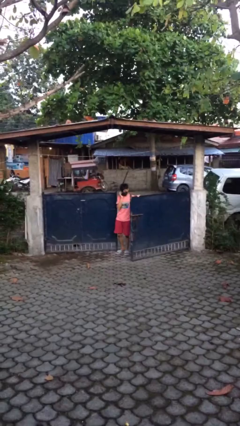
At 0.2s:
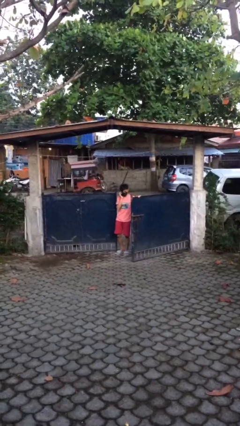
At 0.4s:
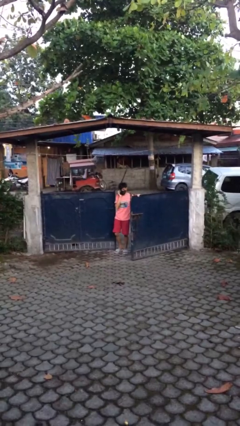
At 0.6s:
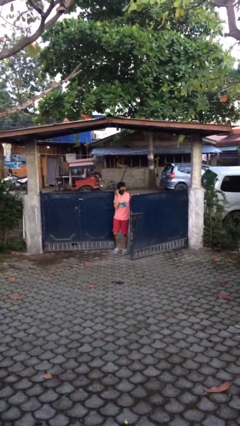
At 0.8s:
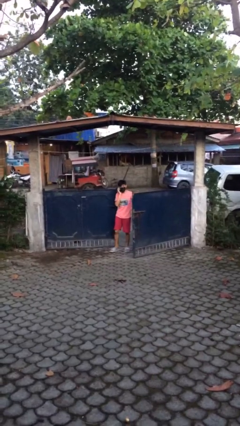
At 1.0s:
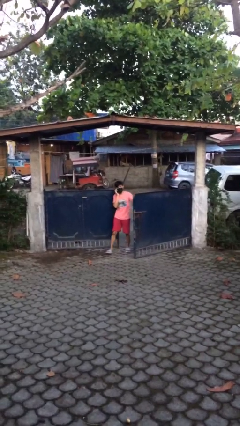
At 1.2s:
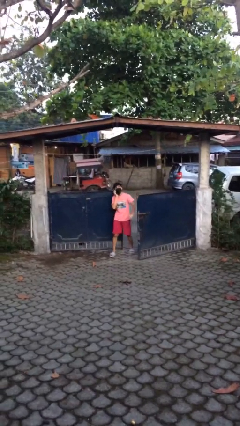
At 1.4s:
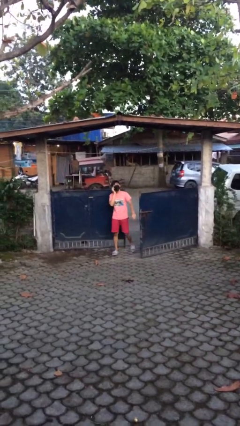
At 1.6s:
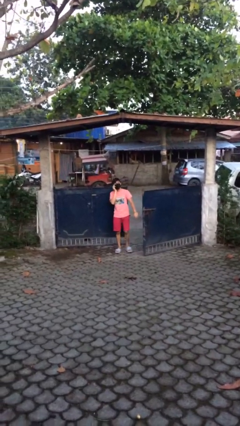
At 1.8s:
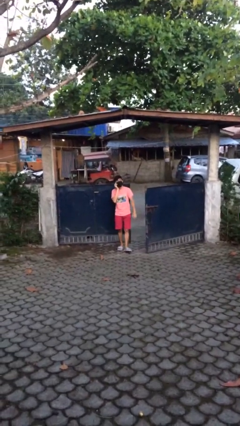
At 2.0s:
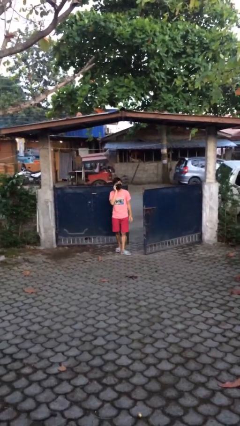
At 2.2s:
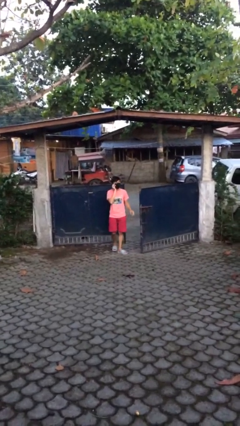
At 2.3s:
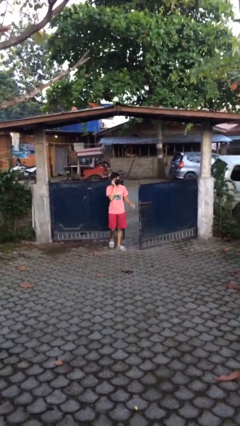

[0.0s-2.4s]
person enters scene through structure

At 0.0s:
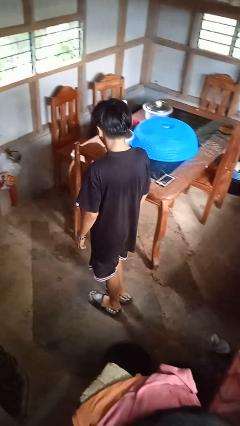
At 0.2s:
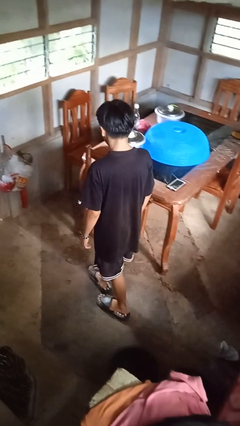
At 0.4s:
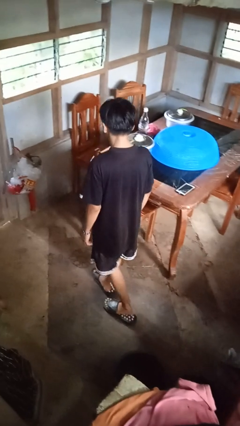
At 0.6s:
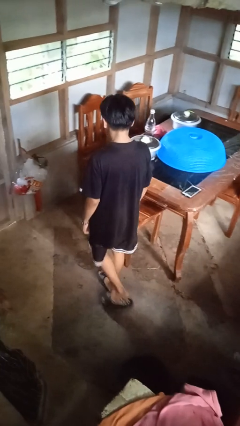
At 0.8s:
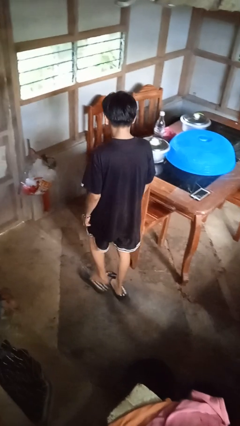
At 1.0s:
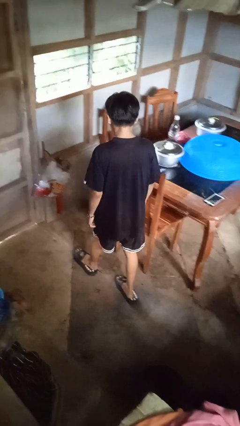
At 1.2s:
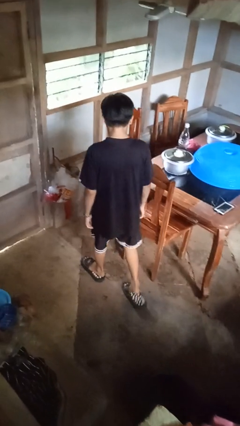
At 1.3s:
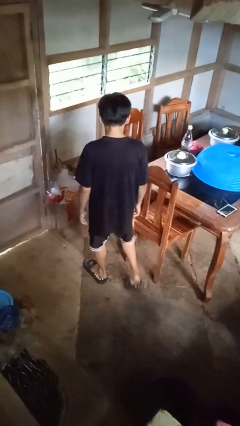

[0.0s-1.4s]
person stubs toe

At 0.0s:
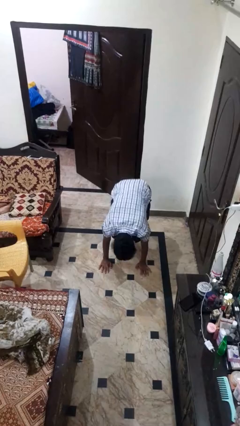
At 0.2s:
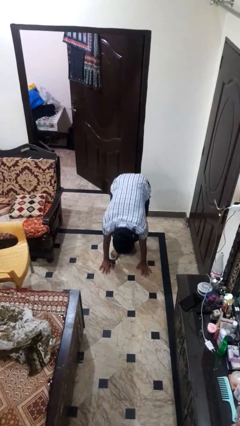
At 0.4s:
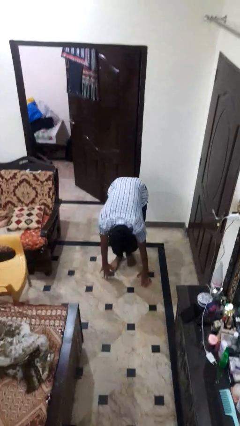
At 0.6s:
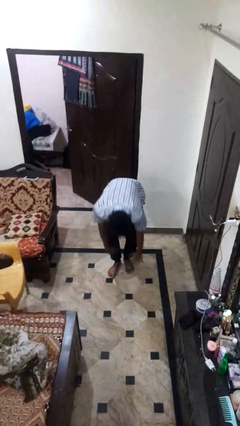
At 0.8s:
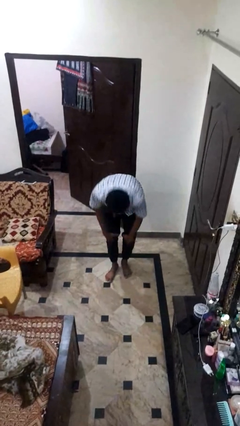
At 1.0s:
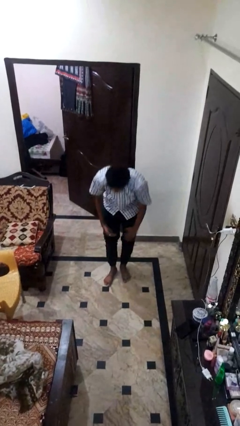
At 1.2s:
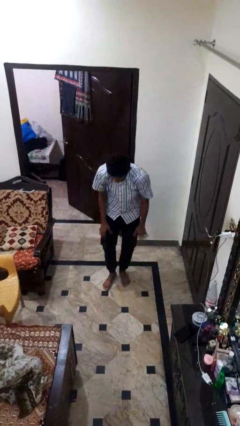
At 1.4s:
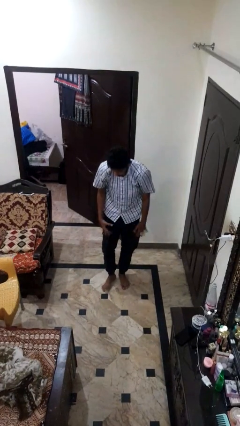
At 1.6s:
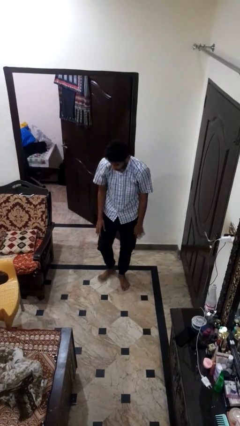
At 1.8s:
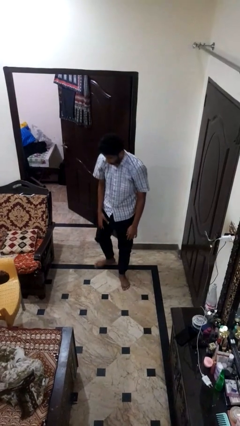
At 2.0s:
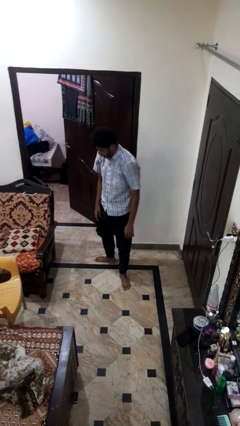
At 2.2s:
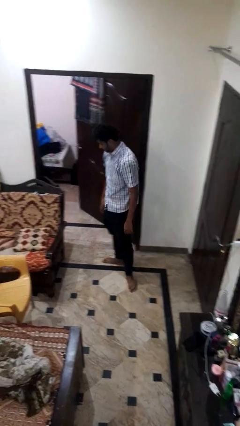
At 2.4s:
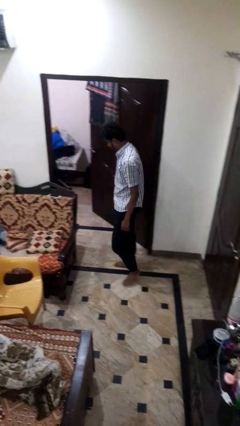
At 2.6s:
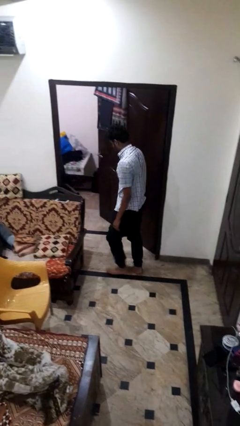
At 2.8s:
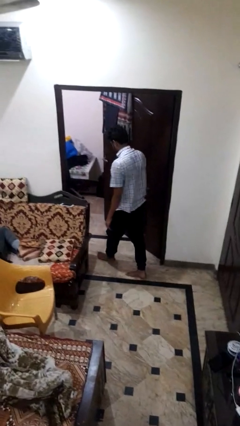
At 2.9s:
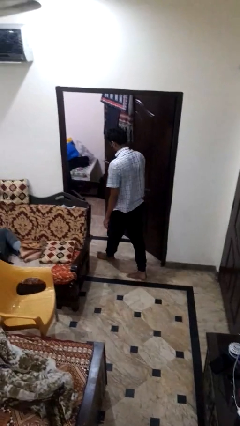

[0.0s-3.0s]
person stands up from floor

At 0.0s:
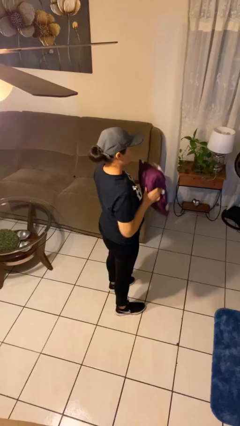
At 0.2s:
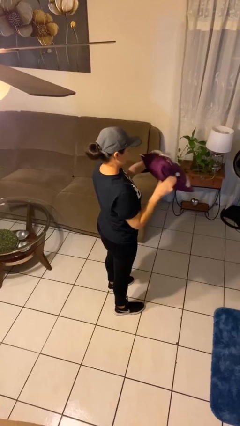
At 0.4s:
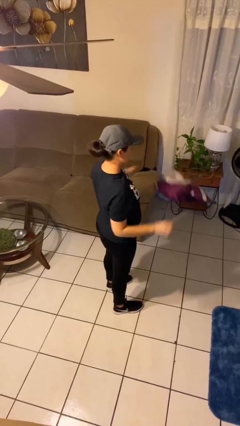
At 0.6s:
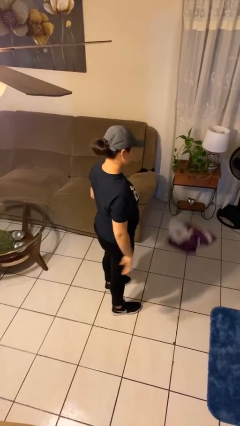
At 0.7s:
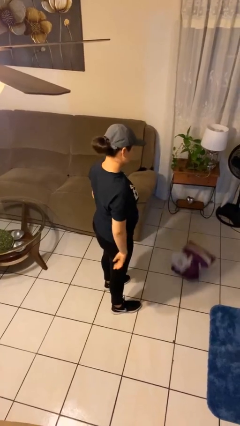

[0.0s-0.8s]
person throws object to ground

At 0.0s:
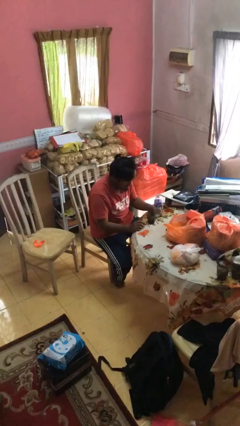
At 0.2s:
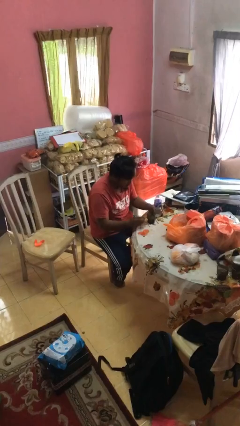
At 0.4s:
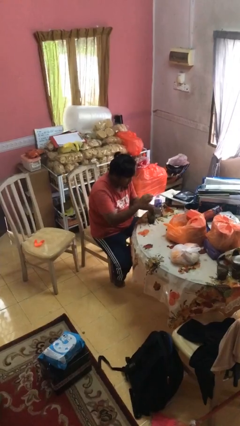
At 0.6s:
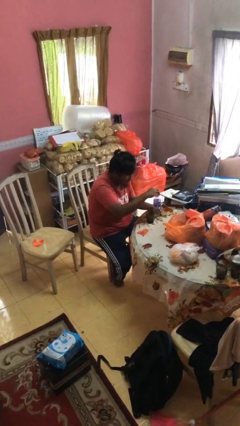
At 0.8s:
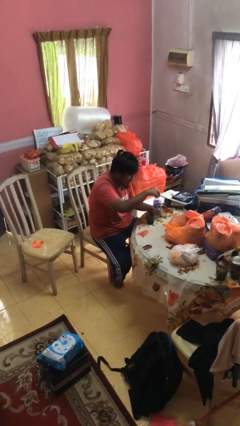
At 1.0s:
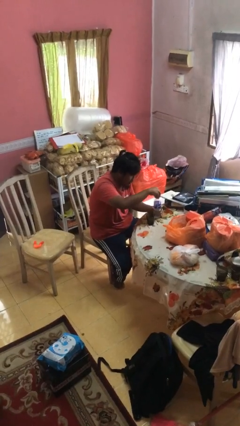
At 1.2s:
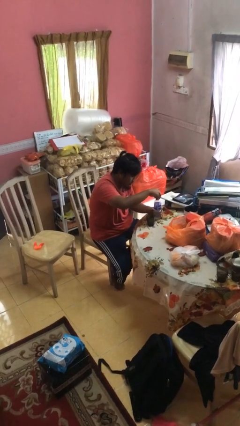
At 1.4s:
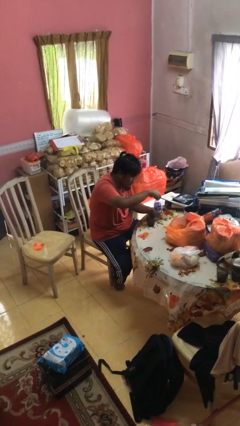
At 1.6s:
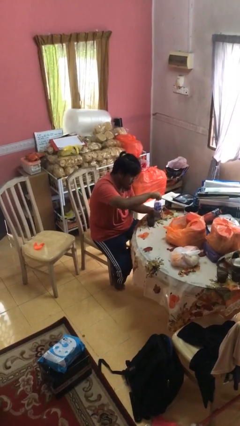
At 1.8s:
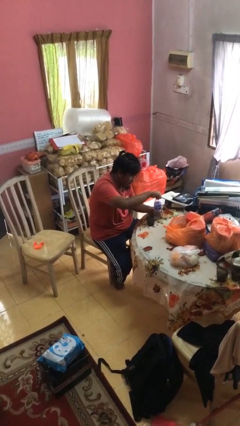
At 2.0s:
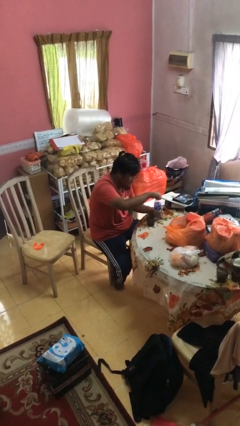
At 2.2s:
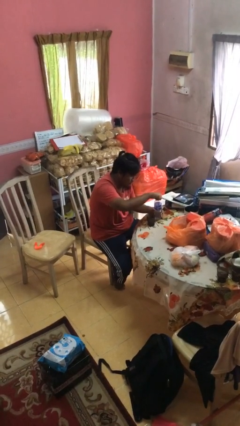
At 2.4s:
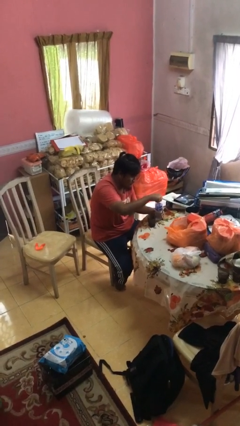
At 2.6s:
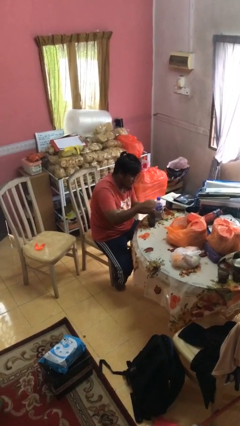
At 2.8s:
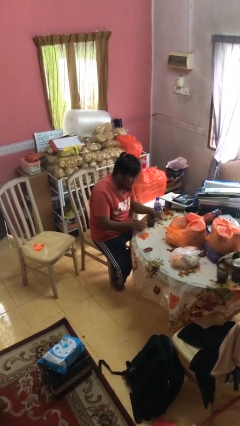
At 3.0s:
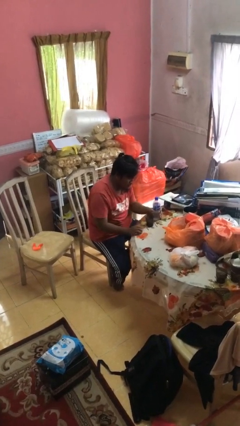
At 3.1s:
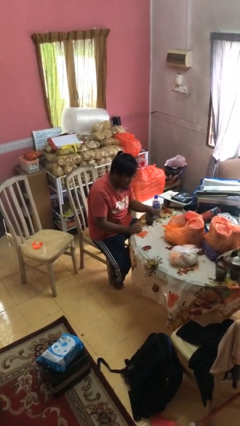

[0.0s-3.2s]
person screws lid to bottle

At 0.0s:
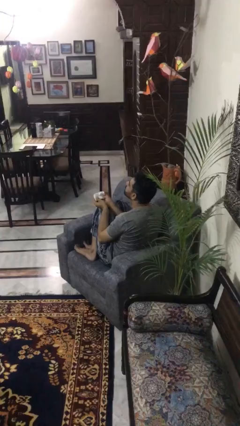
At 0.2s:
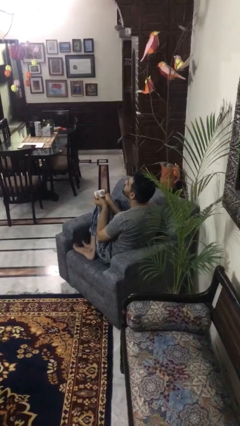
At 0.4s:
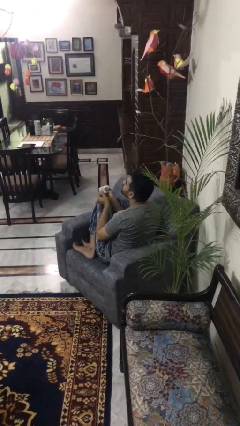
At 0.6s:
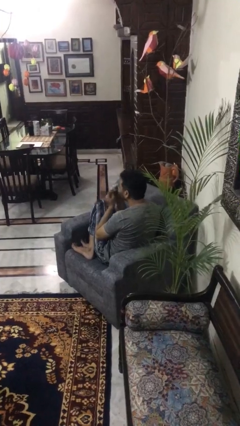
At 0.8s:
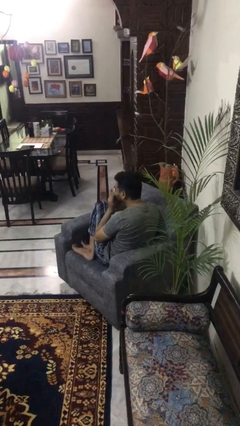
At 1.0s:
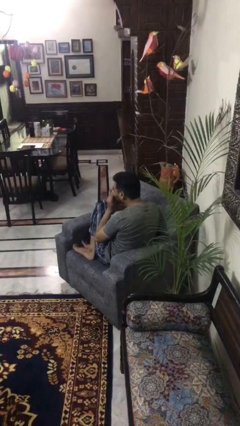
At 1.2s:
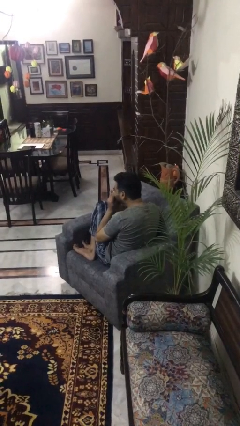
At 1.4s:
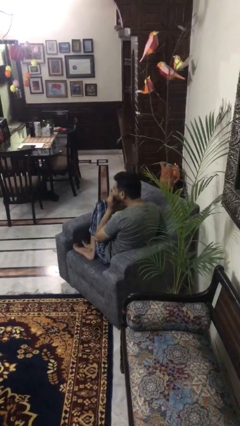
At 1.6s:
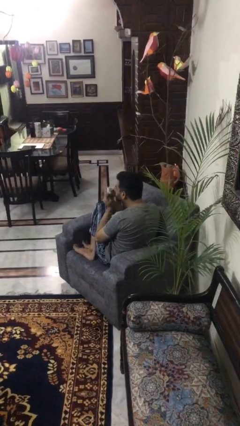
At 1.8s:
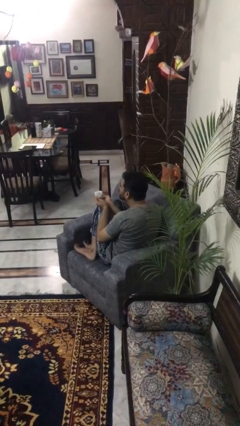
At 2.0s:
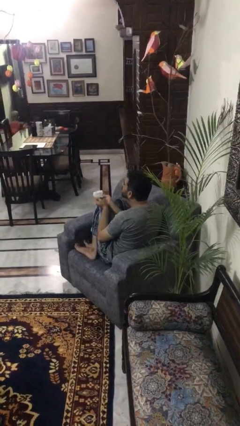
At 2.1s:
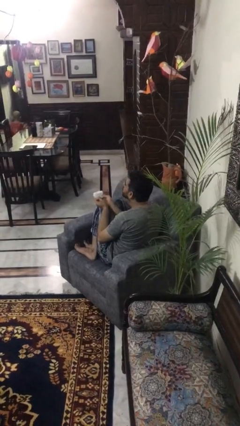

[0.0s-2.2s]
person blows nose

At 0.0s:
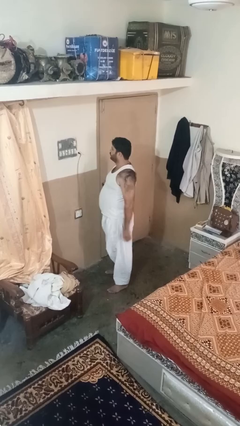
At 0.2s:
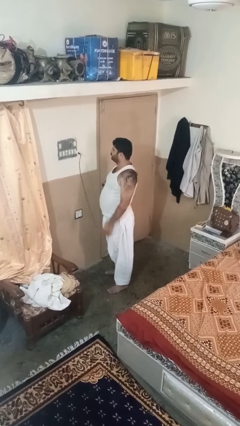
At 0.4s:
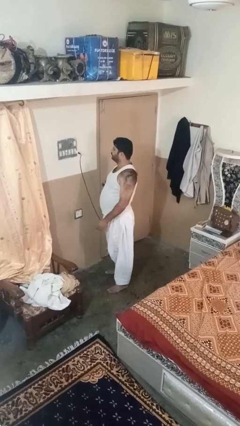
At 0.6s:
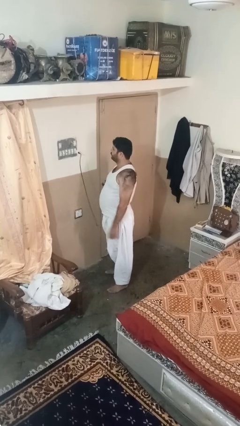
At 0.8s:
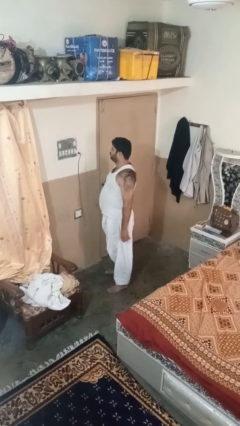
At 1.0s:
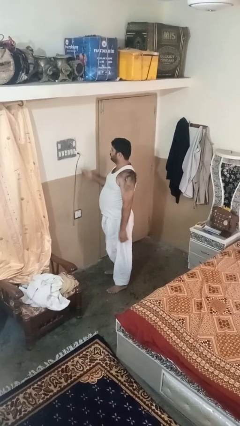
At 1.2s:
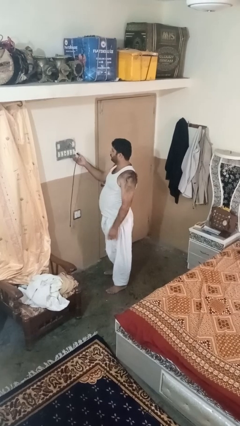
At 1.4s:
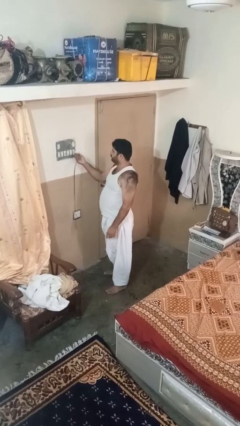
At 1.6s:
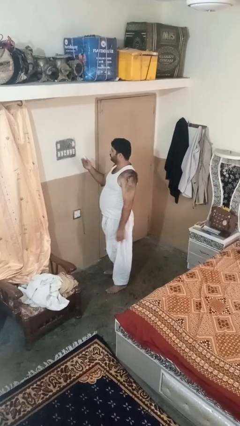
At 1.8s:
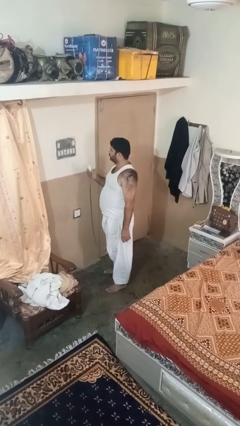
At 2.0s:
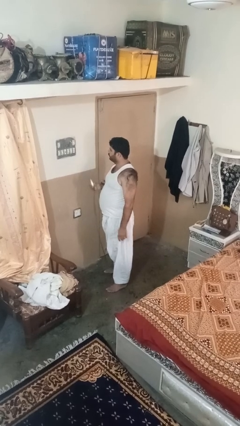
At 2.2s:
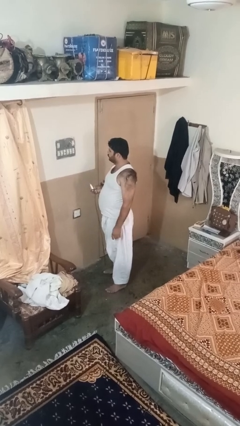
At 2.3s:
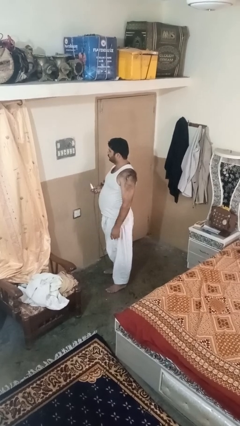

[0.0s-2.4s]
person unplugs from electrical socket

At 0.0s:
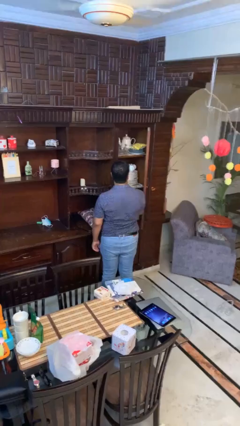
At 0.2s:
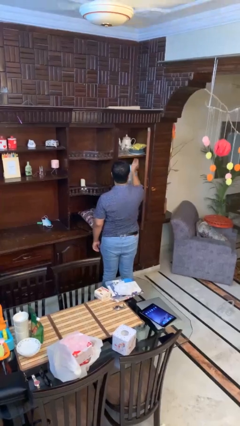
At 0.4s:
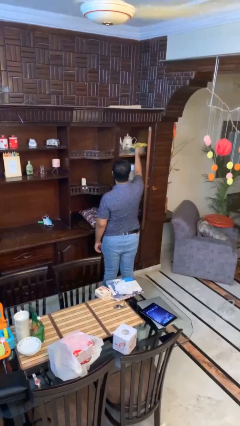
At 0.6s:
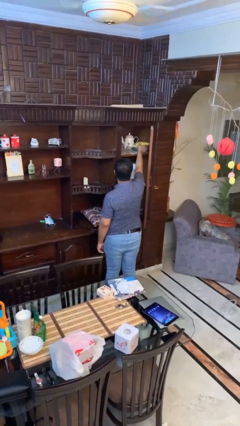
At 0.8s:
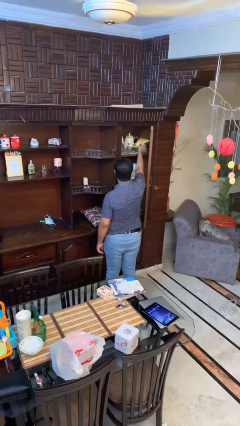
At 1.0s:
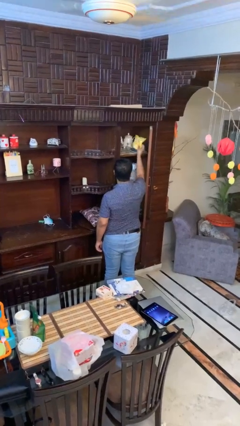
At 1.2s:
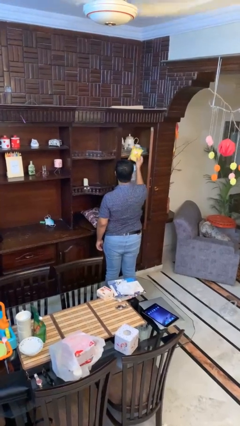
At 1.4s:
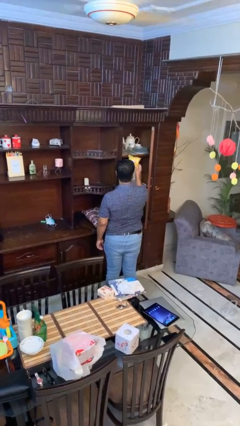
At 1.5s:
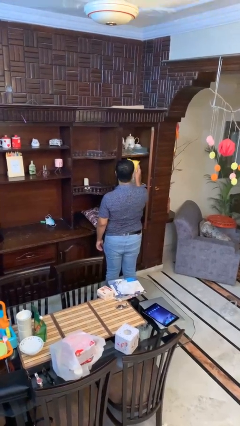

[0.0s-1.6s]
person picks up object from cabinet

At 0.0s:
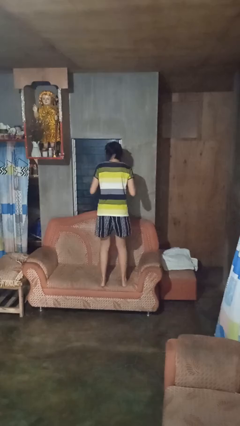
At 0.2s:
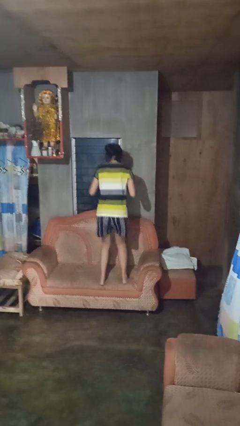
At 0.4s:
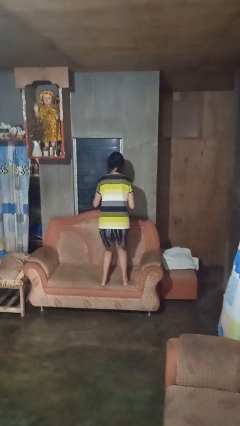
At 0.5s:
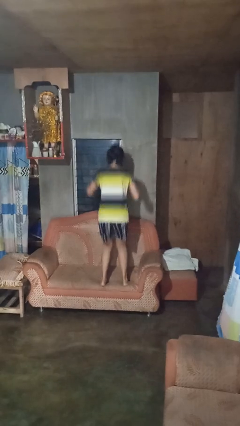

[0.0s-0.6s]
person jumps on couch
